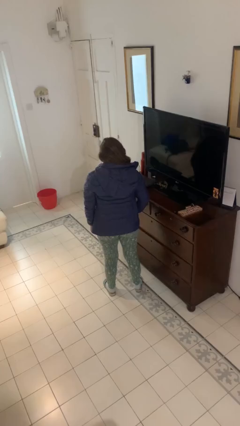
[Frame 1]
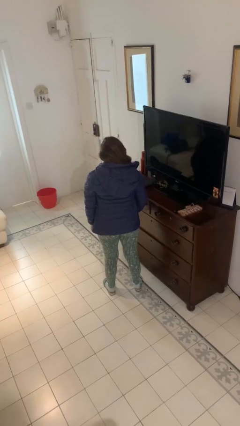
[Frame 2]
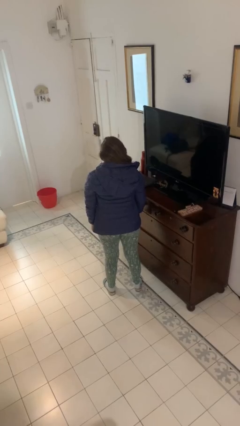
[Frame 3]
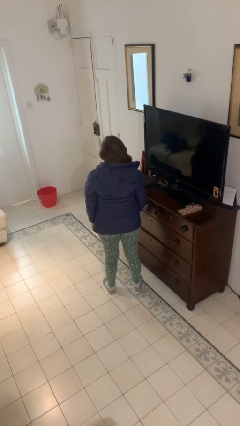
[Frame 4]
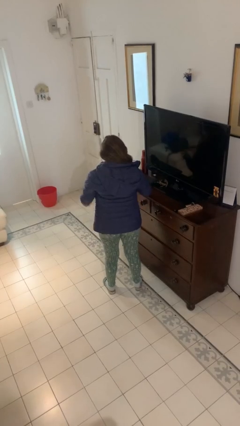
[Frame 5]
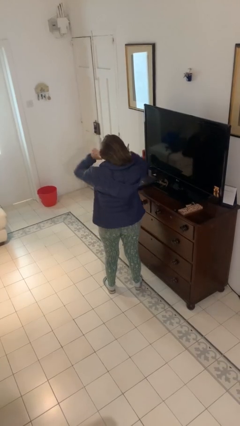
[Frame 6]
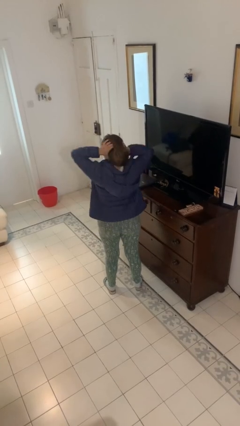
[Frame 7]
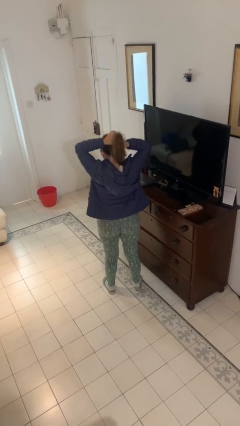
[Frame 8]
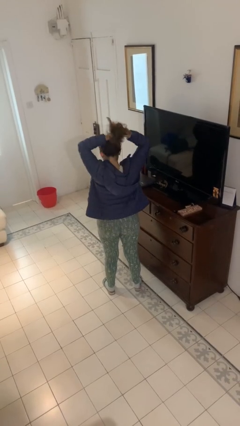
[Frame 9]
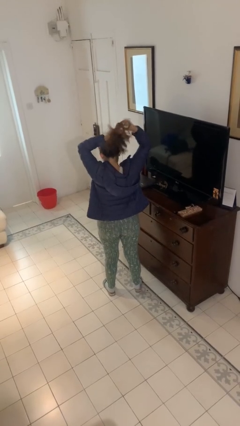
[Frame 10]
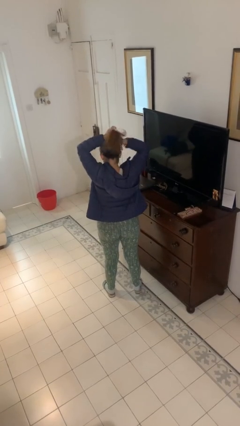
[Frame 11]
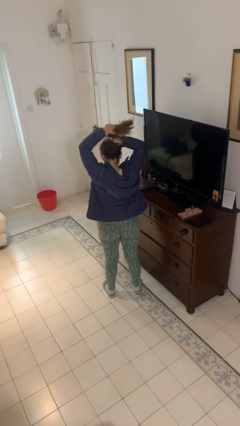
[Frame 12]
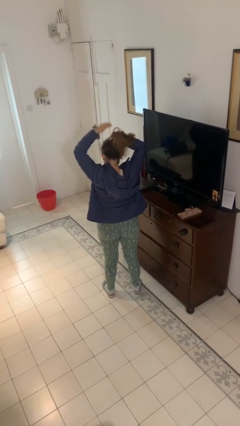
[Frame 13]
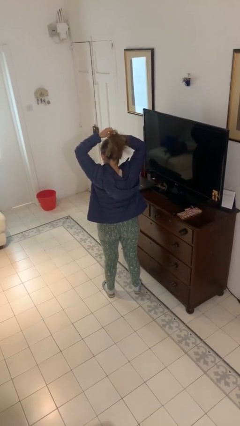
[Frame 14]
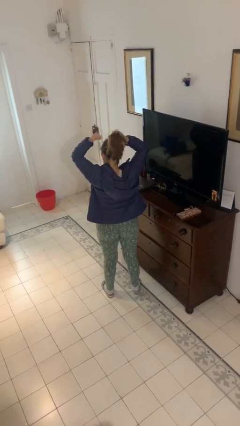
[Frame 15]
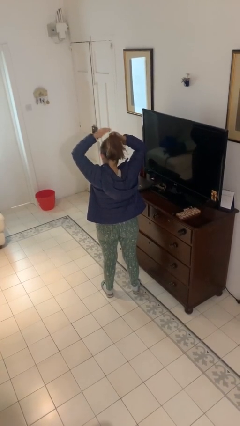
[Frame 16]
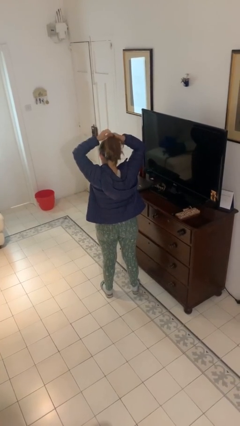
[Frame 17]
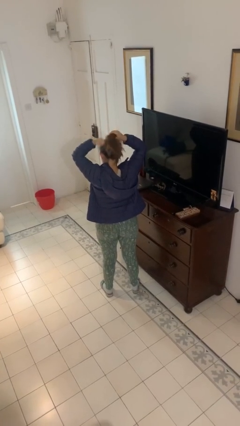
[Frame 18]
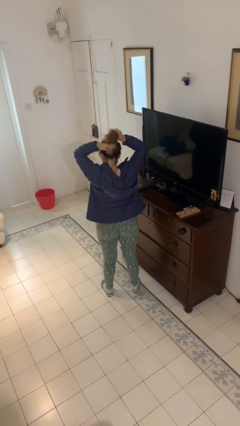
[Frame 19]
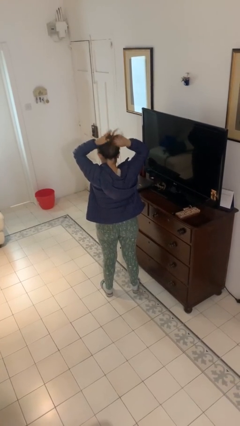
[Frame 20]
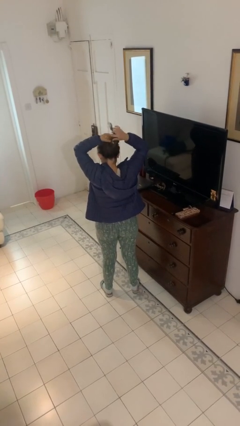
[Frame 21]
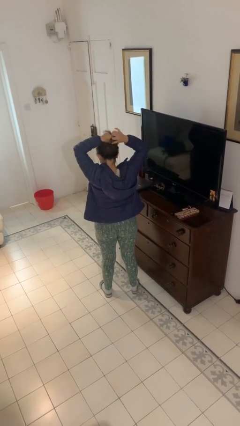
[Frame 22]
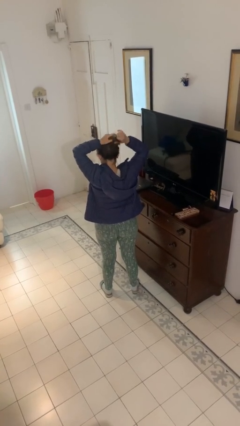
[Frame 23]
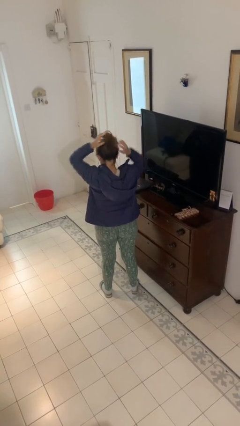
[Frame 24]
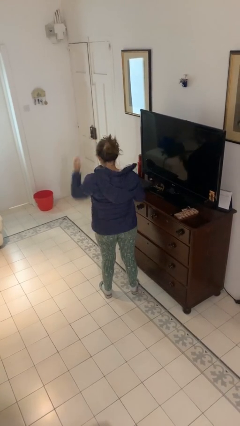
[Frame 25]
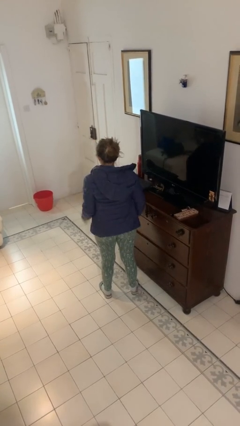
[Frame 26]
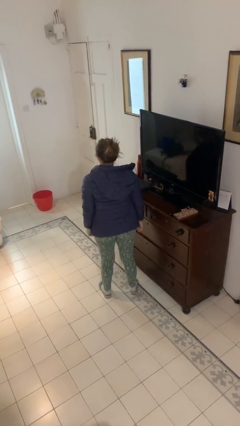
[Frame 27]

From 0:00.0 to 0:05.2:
person puts hair in ponytail

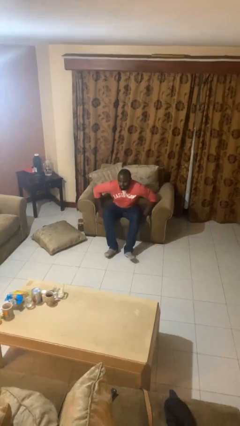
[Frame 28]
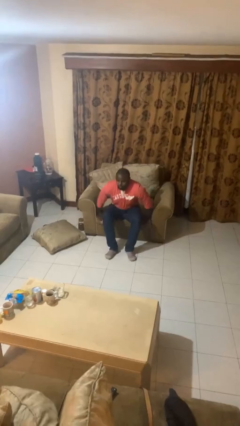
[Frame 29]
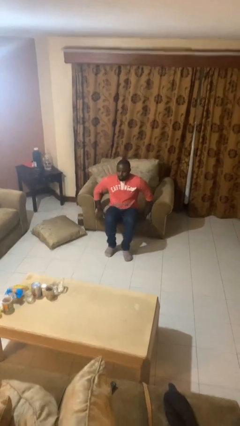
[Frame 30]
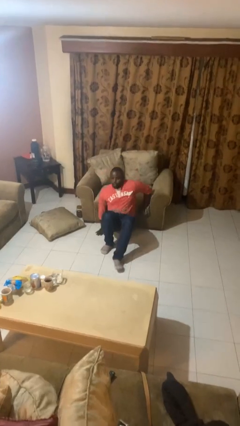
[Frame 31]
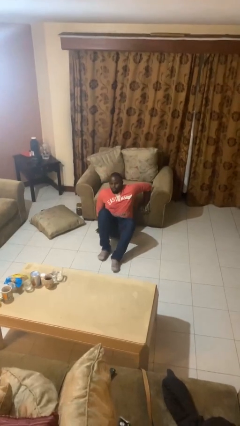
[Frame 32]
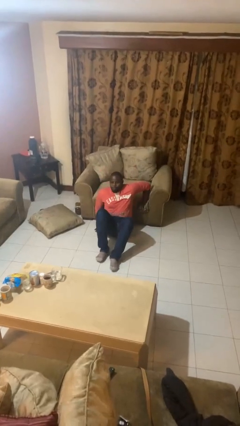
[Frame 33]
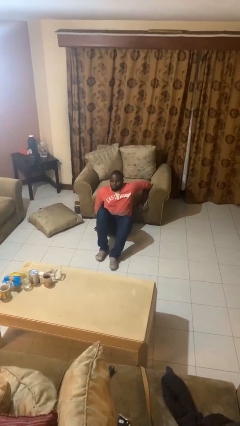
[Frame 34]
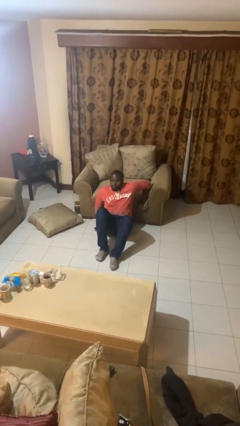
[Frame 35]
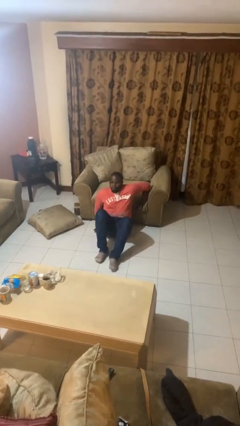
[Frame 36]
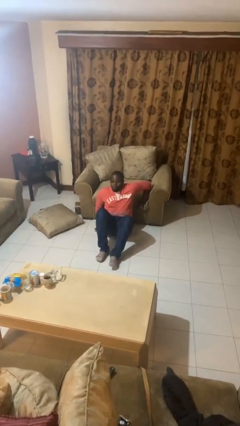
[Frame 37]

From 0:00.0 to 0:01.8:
person falls from chair

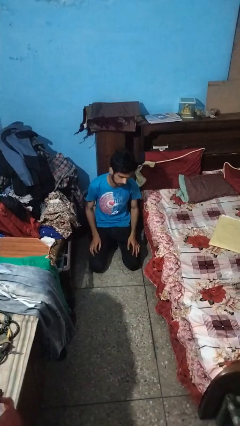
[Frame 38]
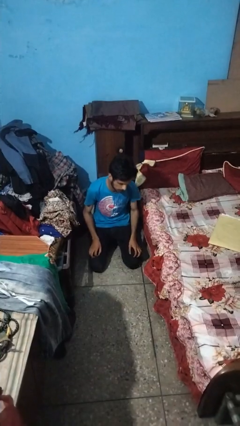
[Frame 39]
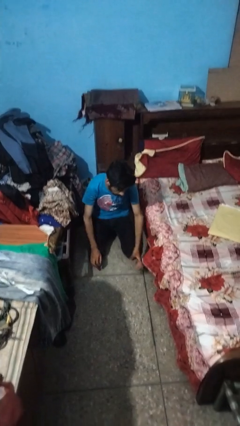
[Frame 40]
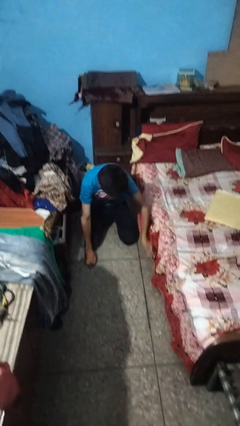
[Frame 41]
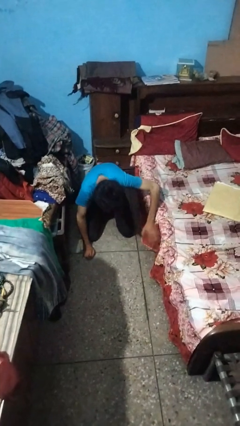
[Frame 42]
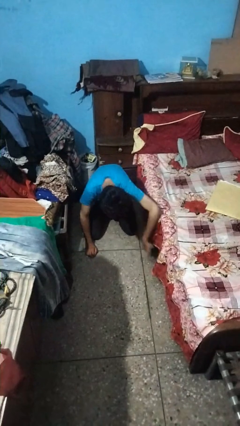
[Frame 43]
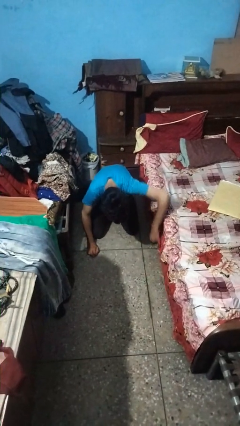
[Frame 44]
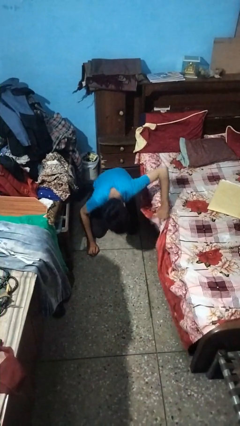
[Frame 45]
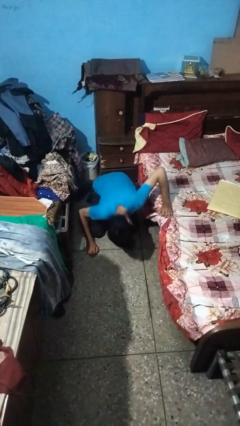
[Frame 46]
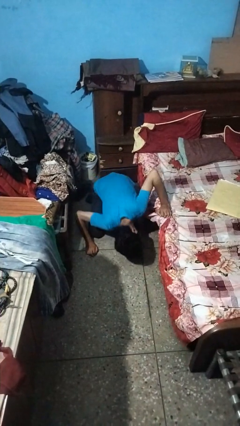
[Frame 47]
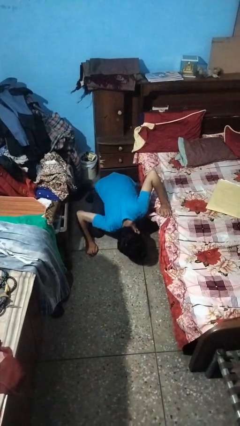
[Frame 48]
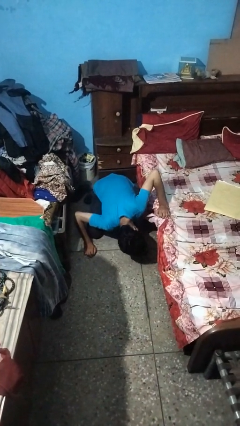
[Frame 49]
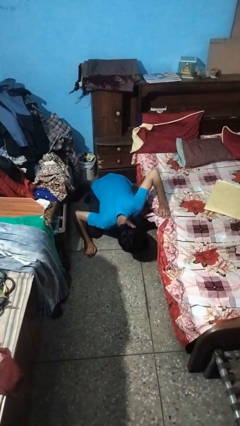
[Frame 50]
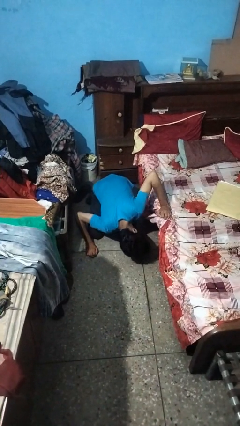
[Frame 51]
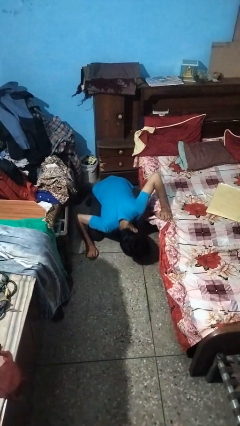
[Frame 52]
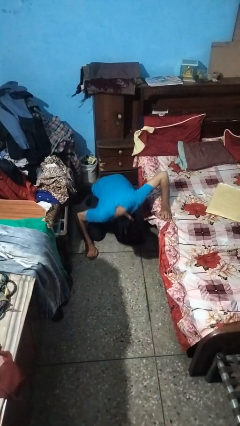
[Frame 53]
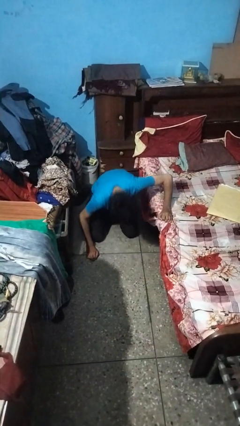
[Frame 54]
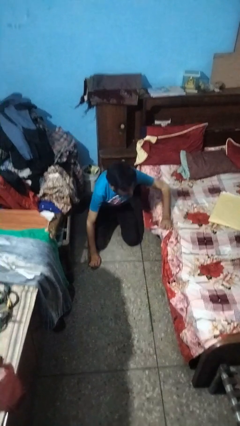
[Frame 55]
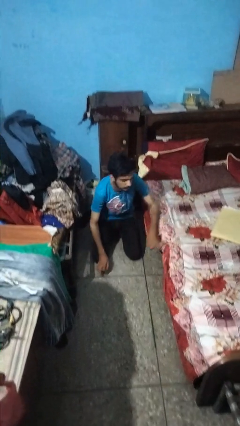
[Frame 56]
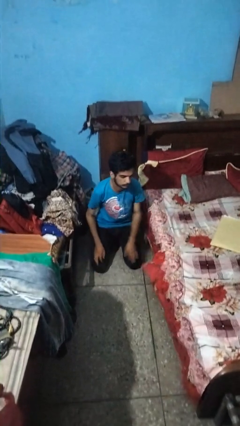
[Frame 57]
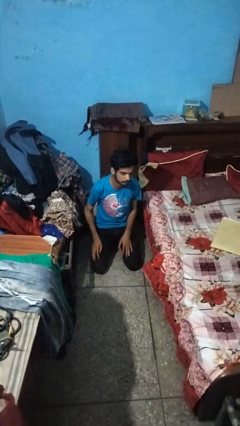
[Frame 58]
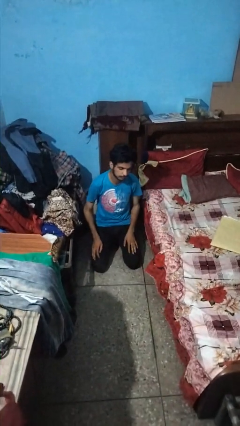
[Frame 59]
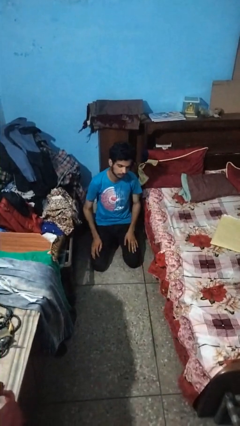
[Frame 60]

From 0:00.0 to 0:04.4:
person searches under bed

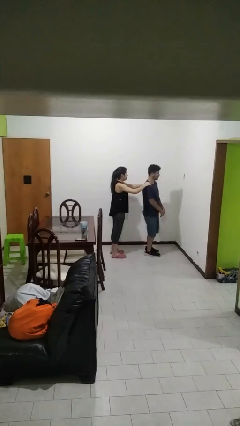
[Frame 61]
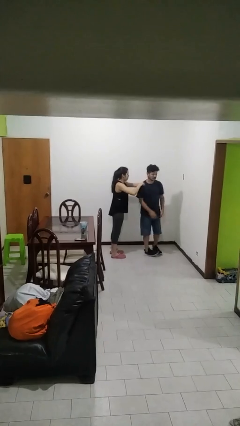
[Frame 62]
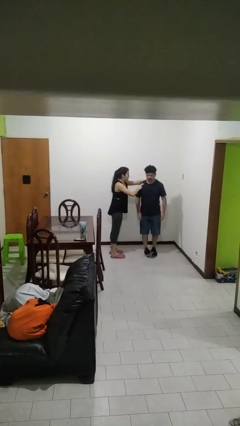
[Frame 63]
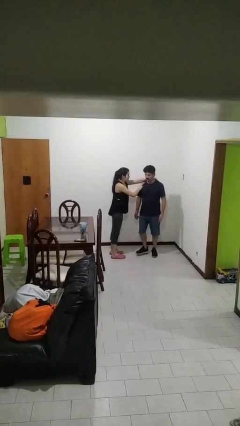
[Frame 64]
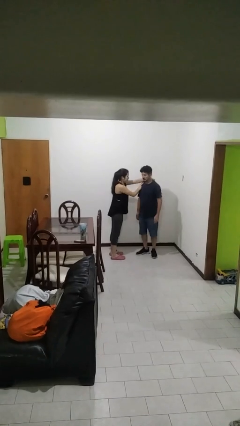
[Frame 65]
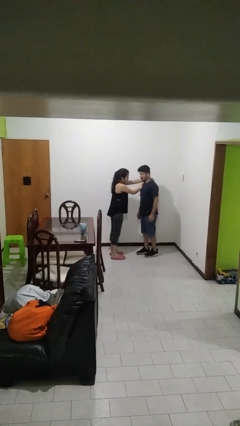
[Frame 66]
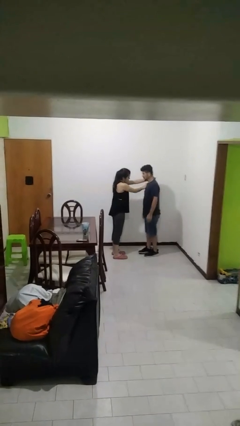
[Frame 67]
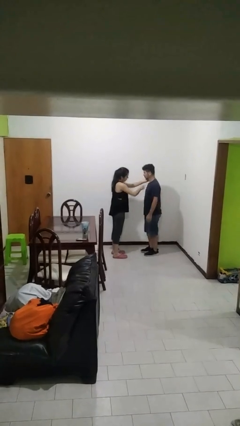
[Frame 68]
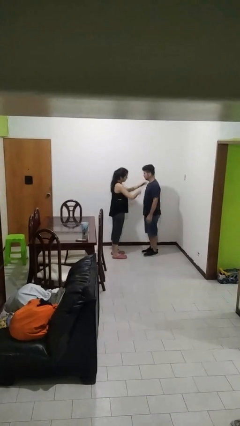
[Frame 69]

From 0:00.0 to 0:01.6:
person spins person around

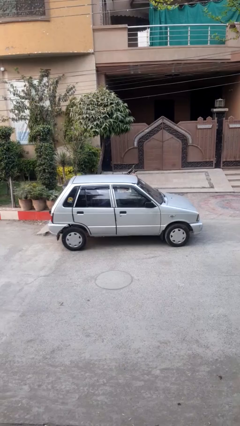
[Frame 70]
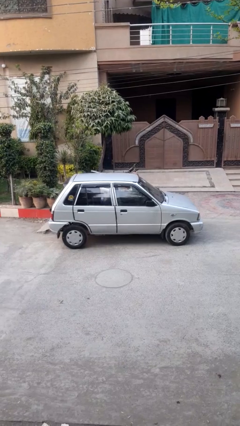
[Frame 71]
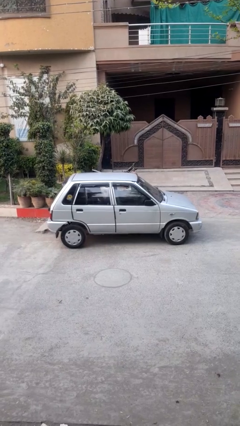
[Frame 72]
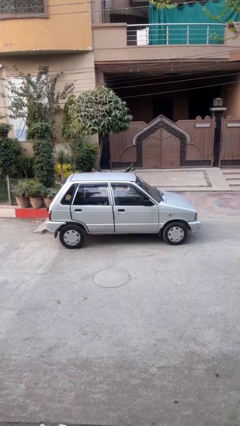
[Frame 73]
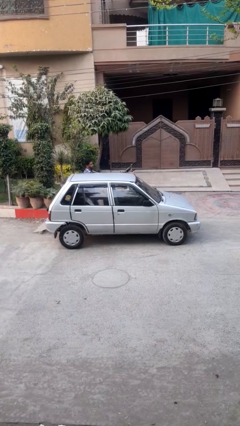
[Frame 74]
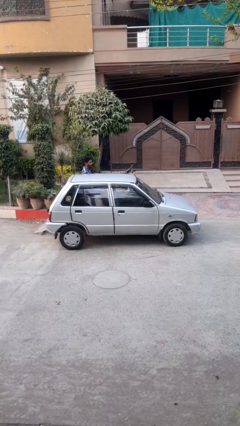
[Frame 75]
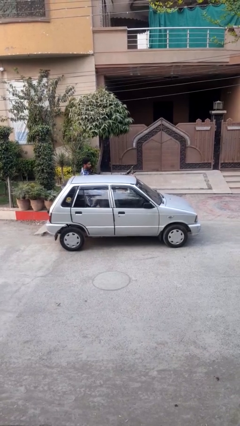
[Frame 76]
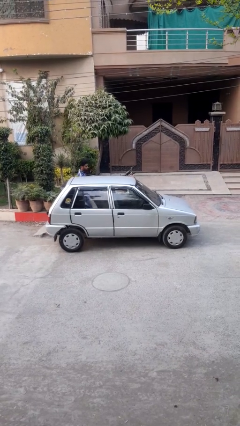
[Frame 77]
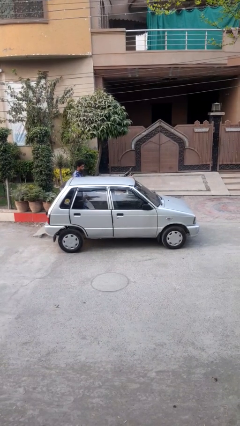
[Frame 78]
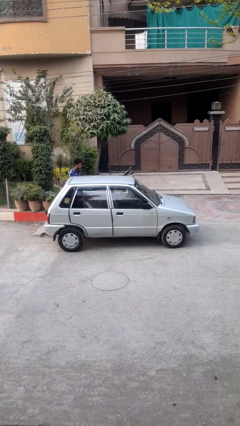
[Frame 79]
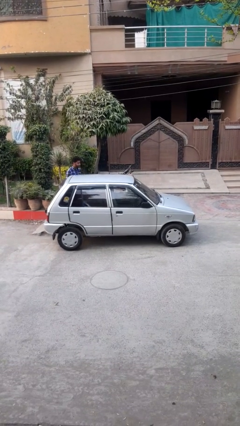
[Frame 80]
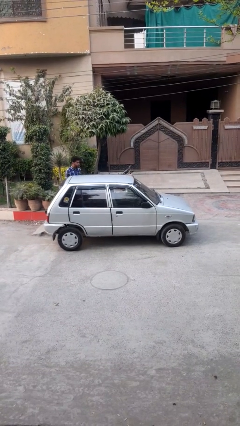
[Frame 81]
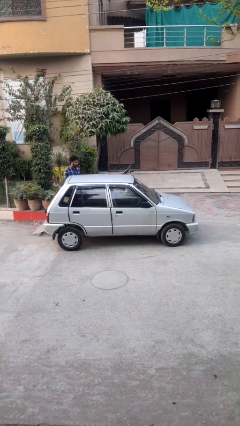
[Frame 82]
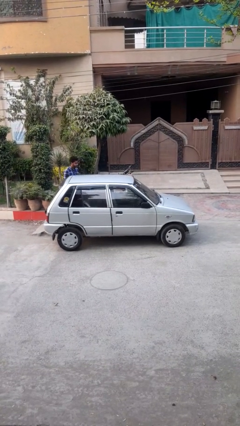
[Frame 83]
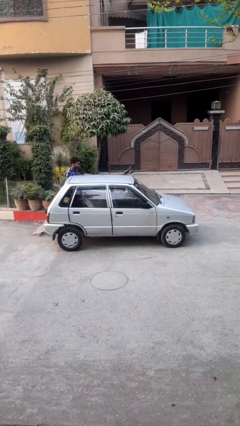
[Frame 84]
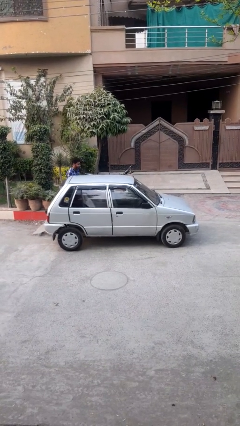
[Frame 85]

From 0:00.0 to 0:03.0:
car drops off person

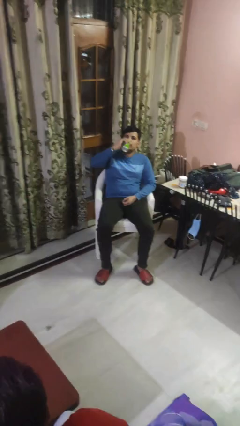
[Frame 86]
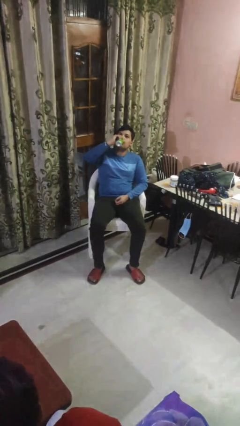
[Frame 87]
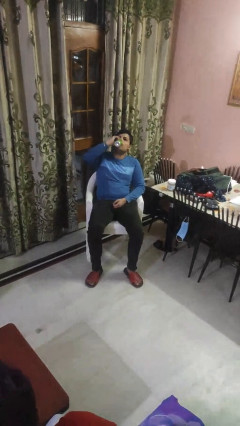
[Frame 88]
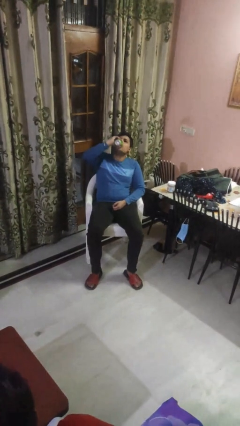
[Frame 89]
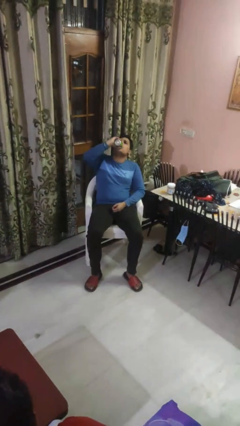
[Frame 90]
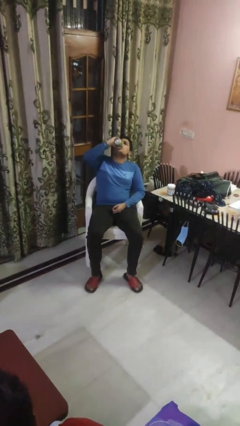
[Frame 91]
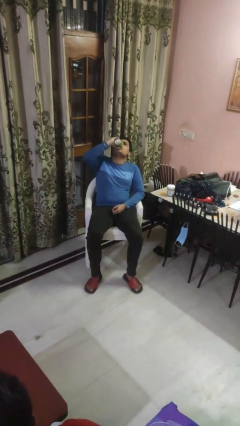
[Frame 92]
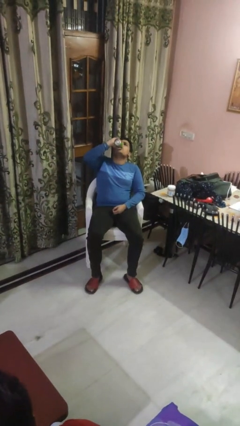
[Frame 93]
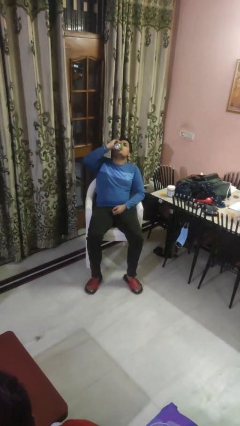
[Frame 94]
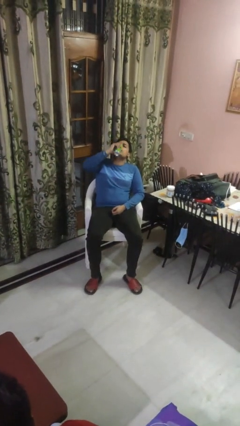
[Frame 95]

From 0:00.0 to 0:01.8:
person drinks from beverage can
